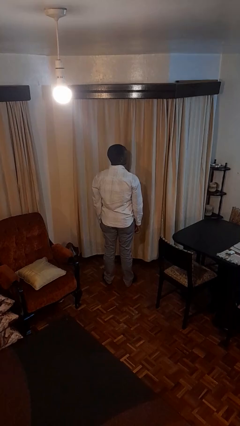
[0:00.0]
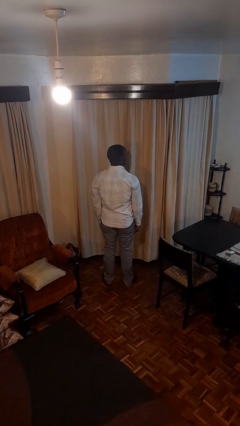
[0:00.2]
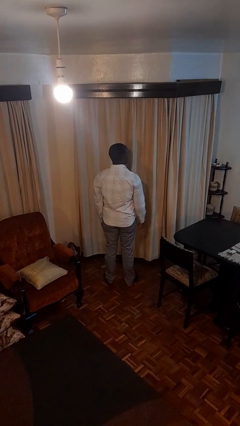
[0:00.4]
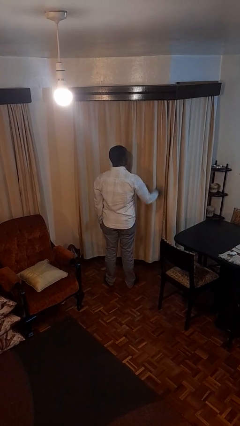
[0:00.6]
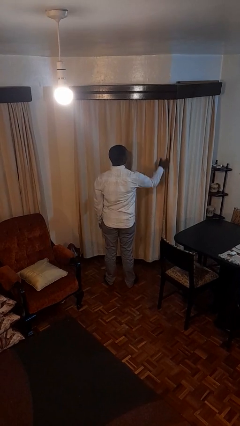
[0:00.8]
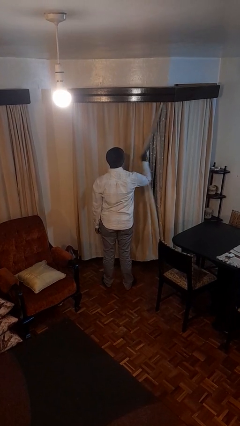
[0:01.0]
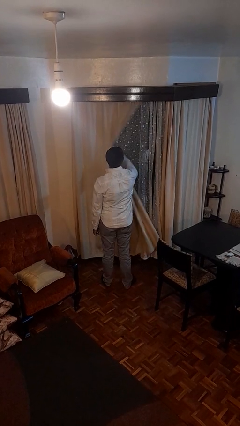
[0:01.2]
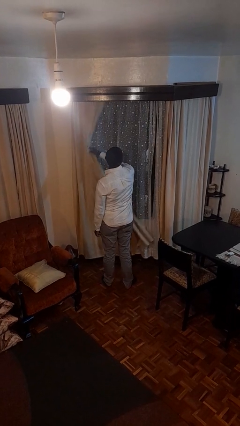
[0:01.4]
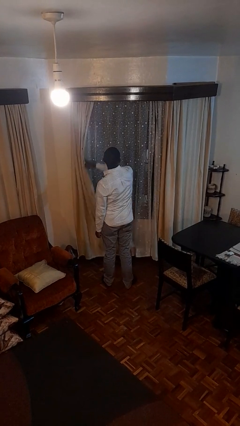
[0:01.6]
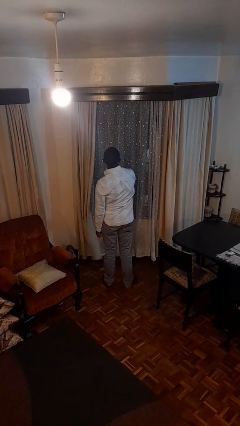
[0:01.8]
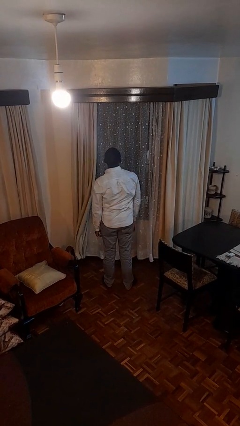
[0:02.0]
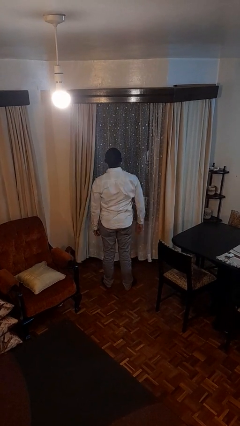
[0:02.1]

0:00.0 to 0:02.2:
person opens curtains

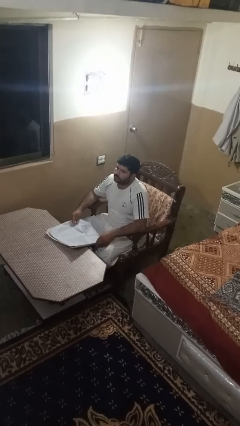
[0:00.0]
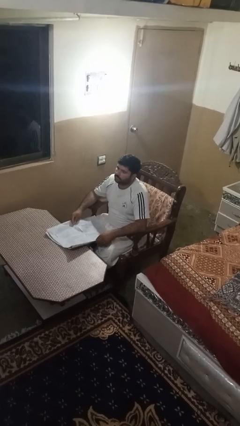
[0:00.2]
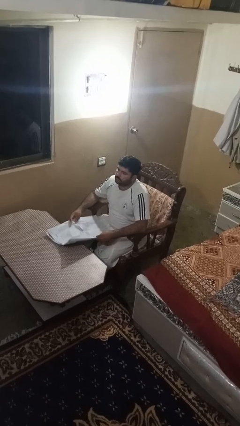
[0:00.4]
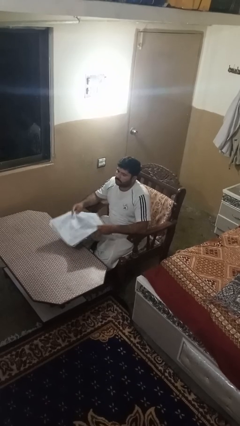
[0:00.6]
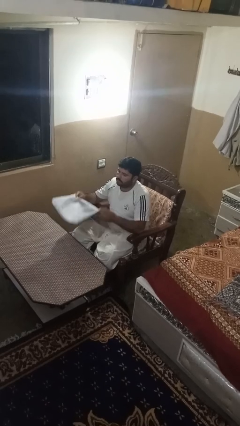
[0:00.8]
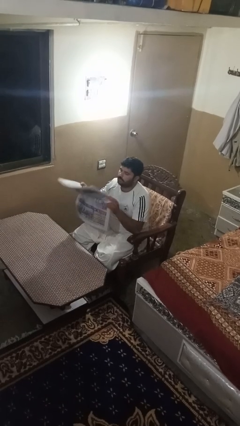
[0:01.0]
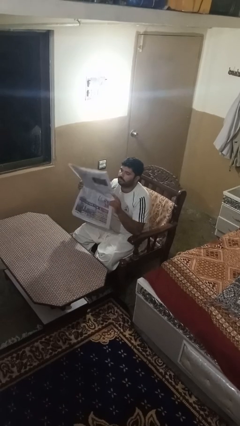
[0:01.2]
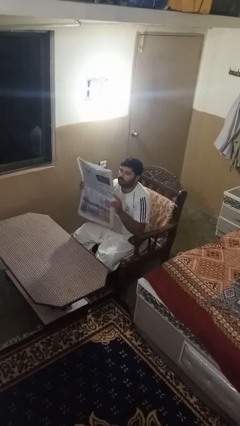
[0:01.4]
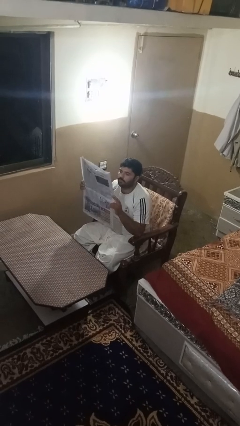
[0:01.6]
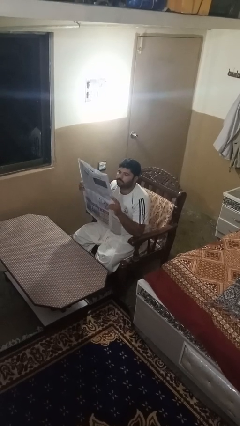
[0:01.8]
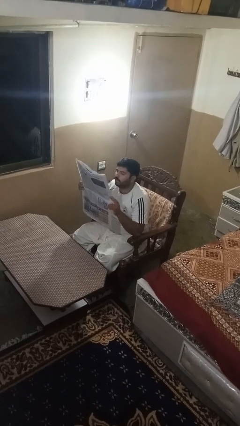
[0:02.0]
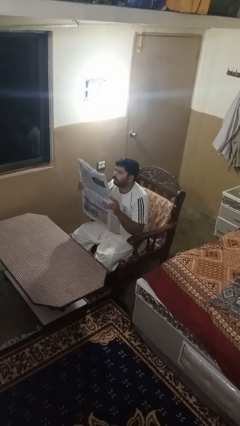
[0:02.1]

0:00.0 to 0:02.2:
person reads newspaper

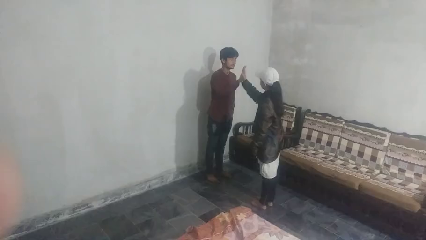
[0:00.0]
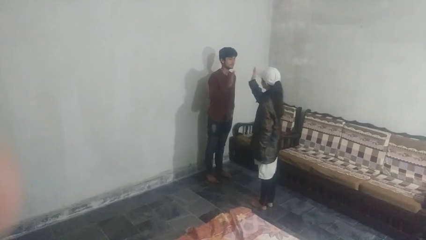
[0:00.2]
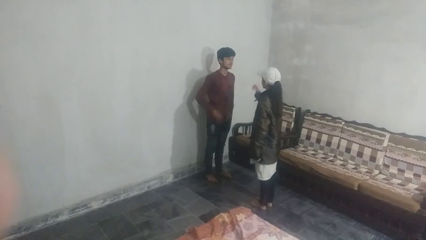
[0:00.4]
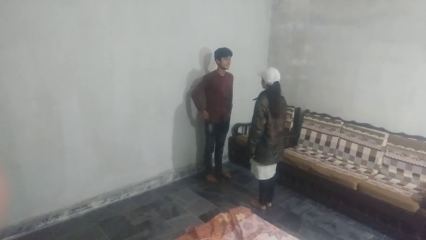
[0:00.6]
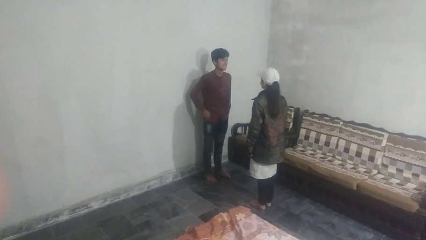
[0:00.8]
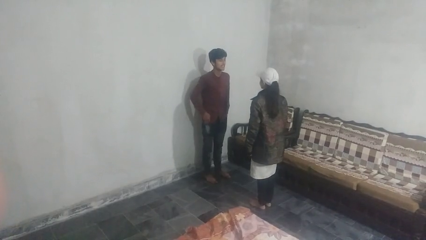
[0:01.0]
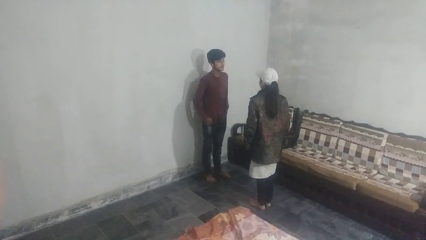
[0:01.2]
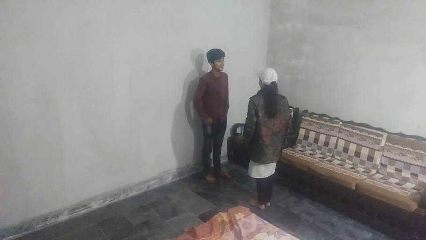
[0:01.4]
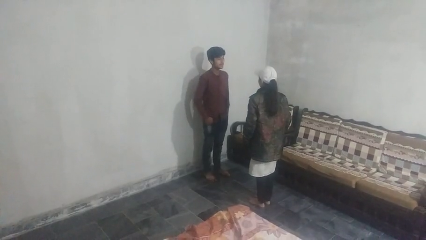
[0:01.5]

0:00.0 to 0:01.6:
person highfives hand

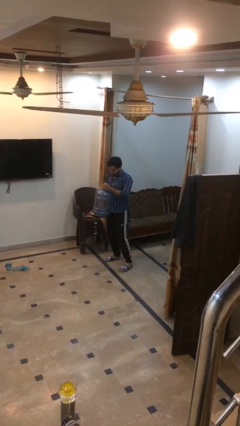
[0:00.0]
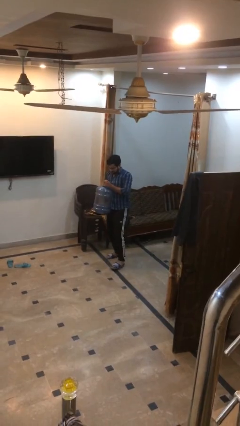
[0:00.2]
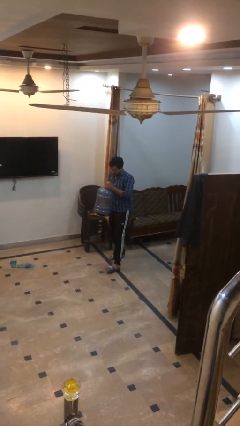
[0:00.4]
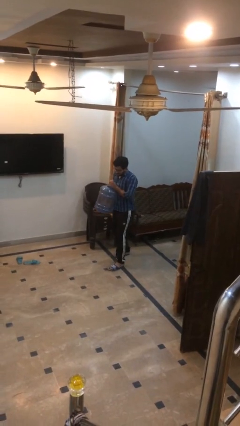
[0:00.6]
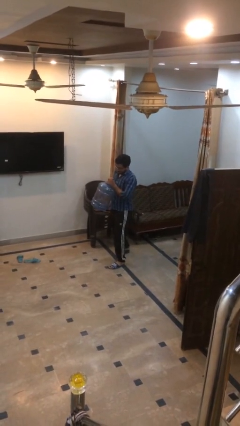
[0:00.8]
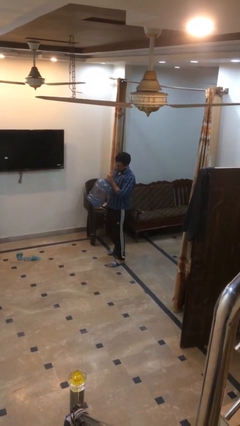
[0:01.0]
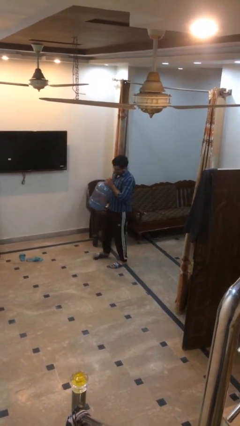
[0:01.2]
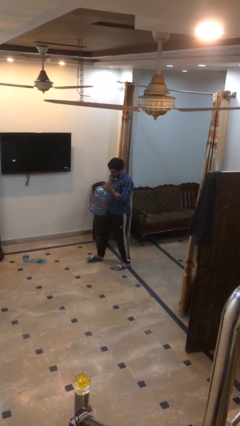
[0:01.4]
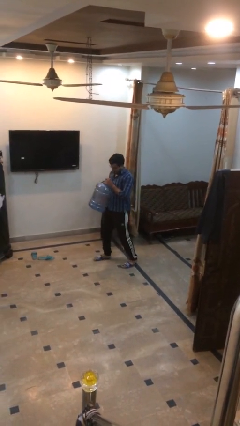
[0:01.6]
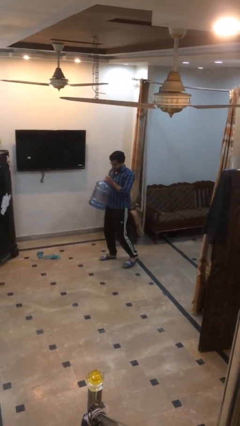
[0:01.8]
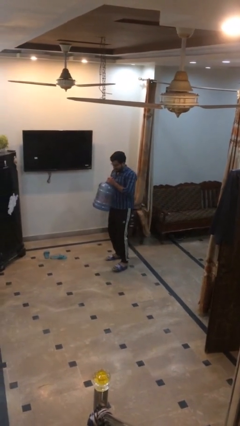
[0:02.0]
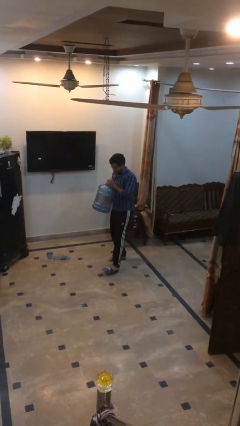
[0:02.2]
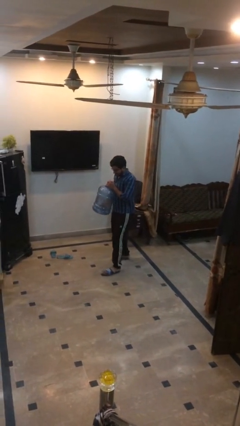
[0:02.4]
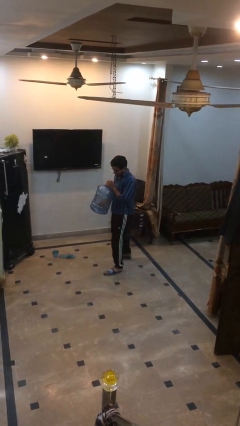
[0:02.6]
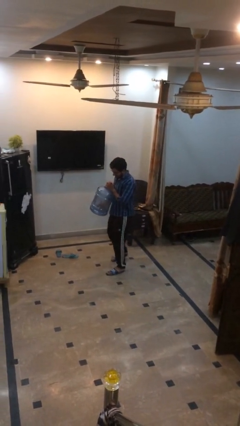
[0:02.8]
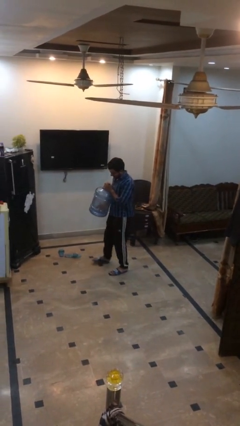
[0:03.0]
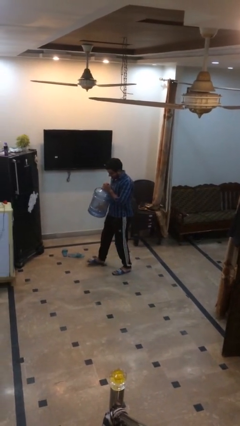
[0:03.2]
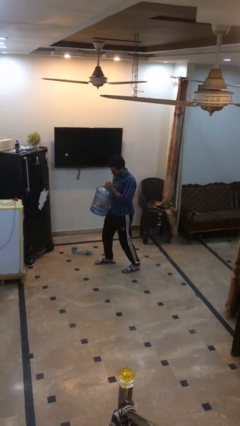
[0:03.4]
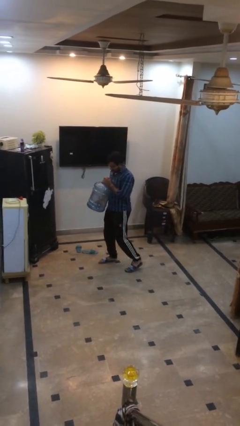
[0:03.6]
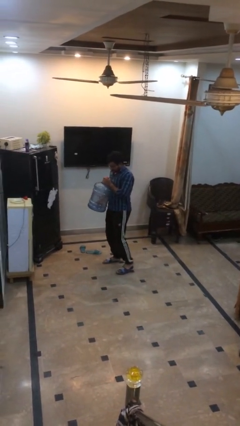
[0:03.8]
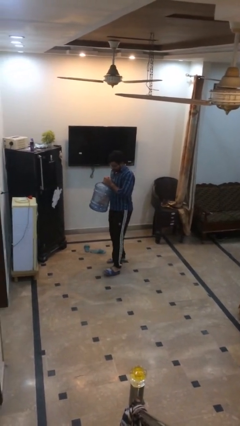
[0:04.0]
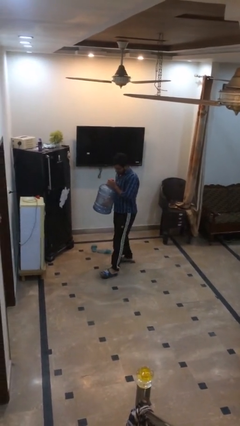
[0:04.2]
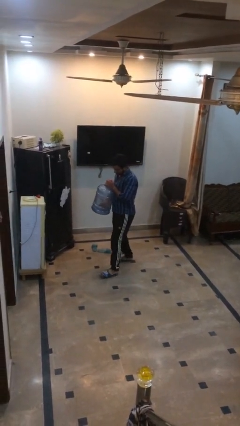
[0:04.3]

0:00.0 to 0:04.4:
person carries heavy object

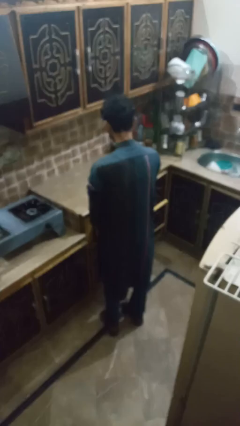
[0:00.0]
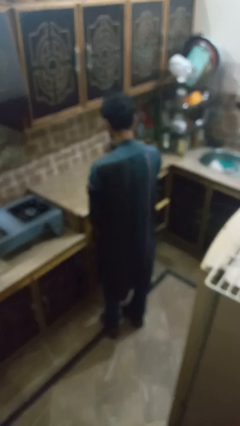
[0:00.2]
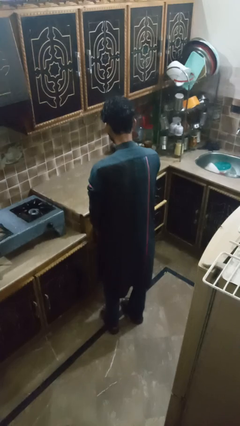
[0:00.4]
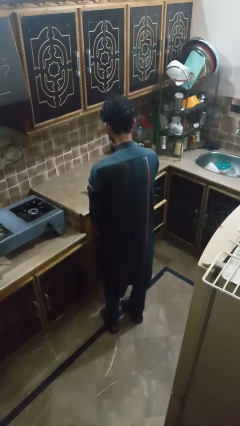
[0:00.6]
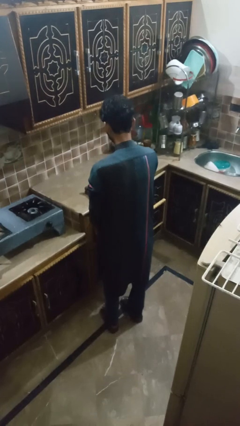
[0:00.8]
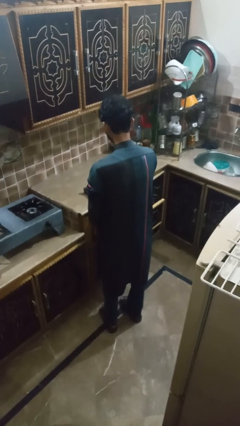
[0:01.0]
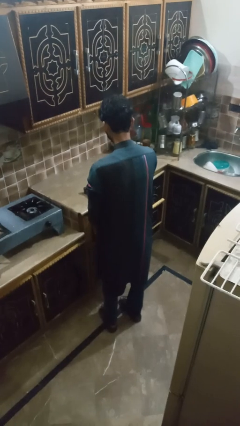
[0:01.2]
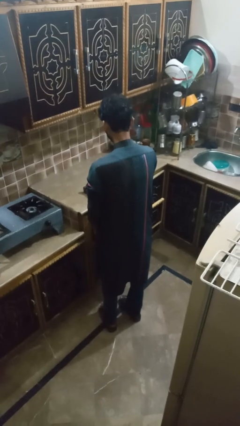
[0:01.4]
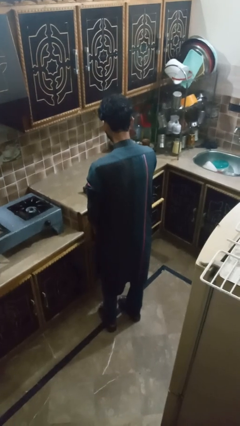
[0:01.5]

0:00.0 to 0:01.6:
person takes object from kitchen drawer

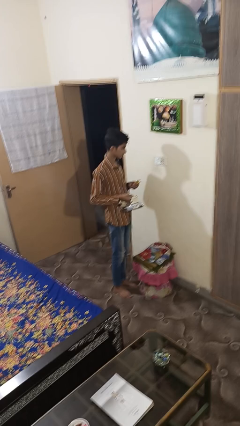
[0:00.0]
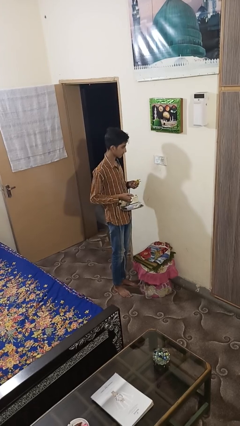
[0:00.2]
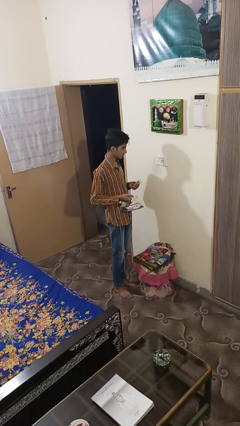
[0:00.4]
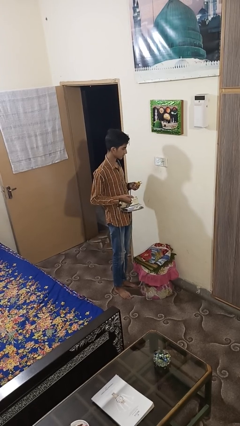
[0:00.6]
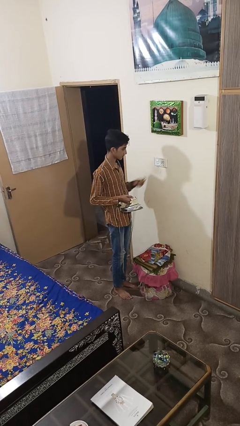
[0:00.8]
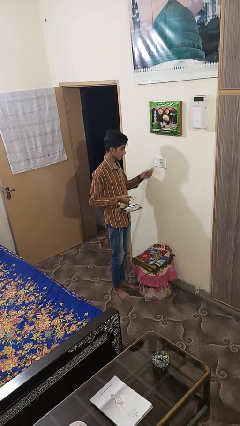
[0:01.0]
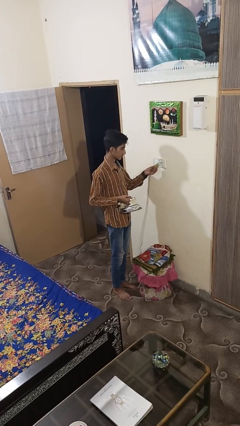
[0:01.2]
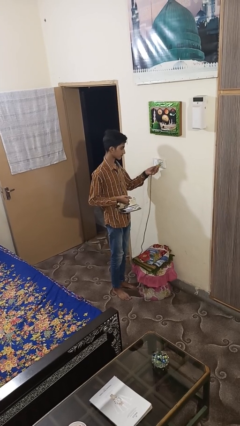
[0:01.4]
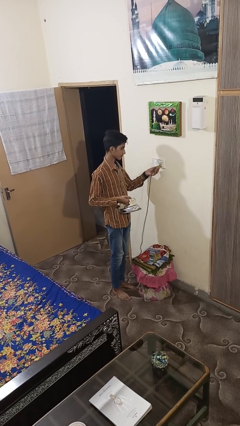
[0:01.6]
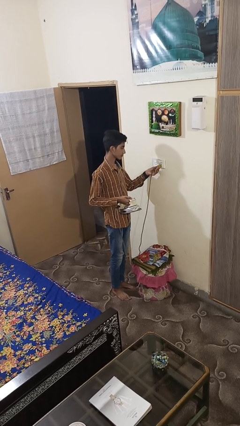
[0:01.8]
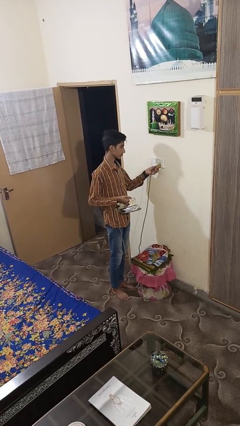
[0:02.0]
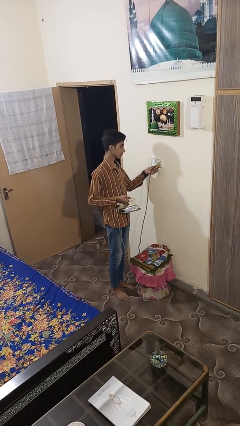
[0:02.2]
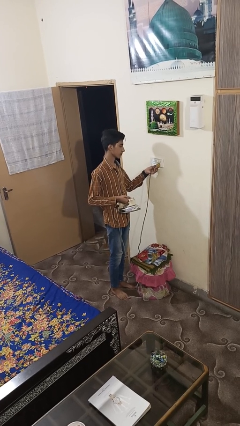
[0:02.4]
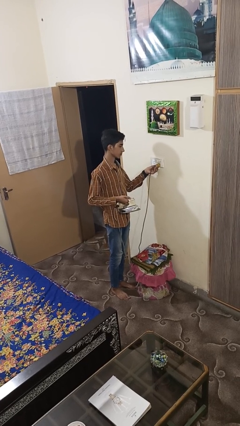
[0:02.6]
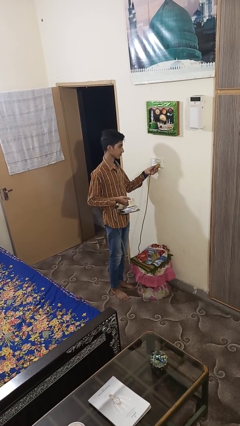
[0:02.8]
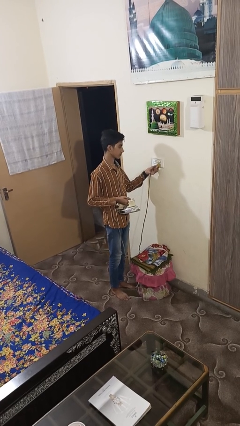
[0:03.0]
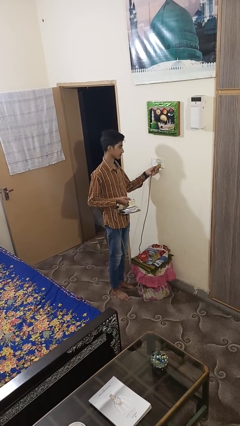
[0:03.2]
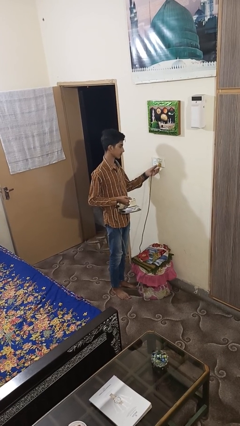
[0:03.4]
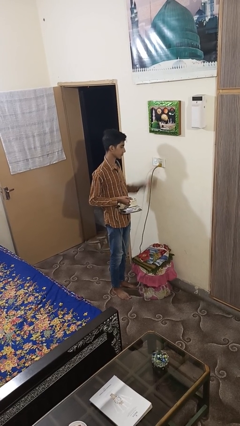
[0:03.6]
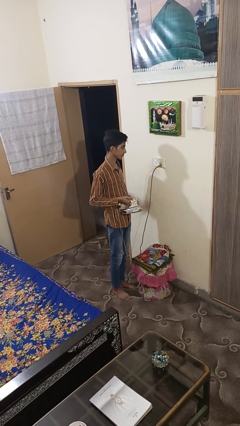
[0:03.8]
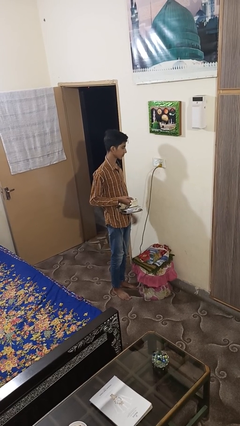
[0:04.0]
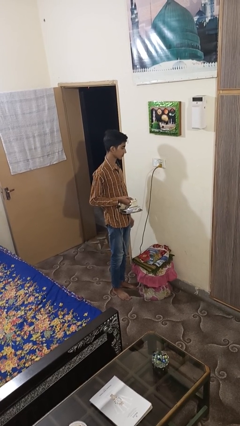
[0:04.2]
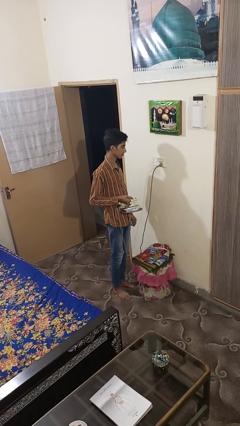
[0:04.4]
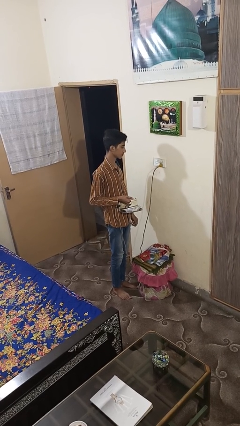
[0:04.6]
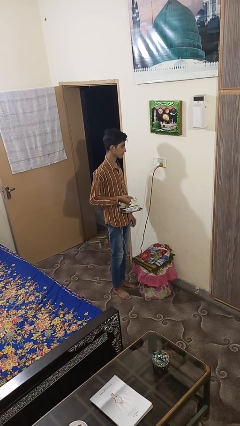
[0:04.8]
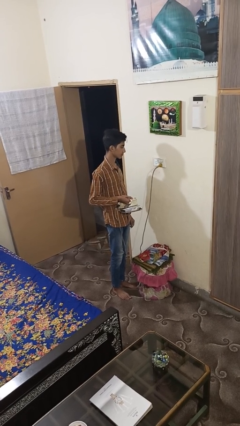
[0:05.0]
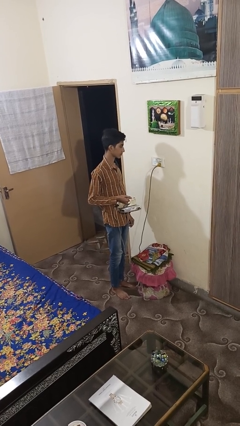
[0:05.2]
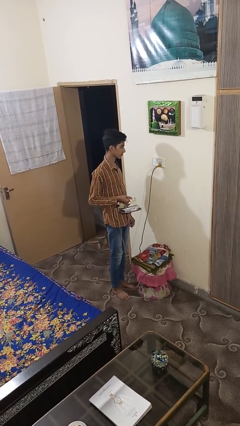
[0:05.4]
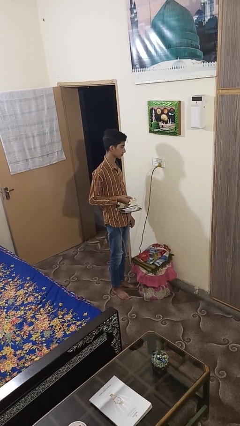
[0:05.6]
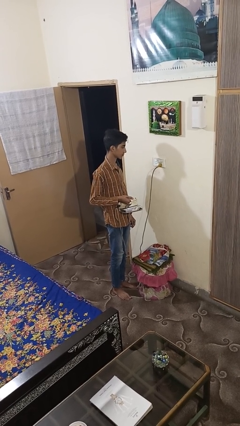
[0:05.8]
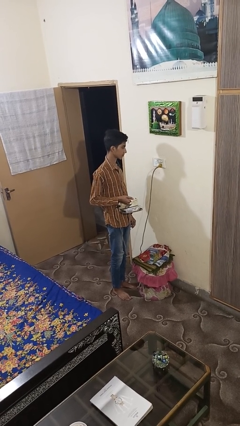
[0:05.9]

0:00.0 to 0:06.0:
person plugs into electrical socket
